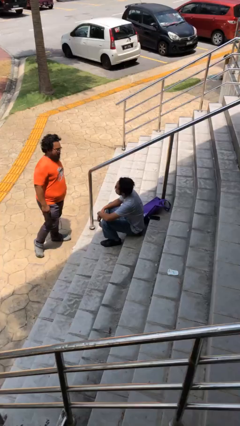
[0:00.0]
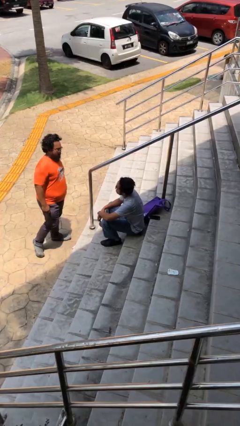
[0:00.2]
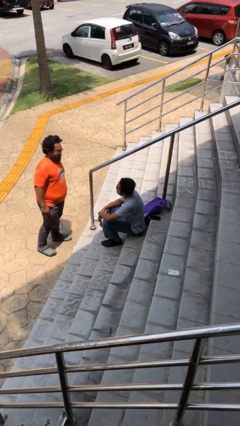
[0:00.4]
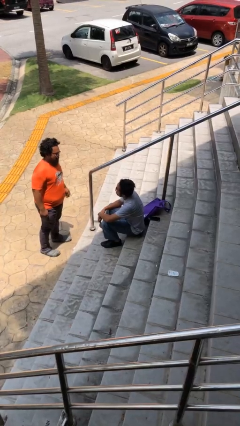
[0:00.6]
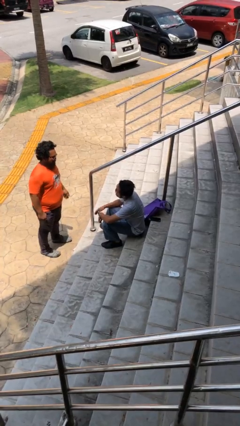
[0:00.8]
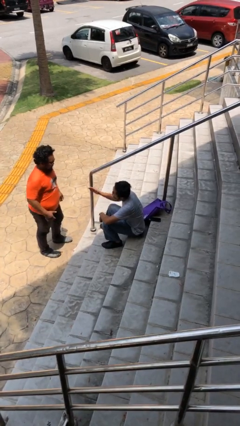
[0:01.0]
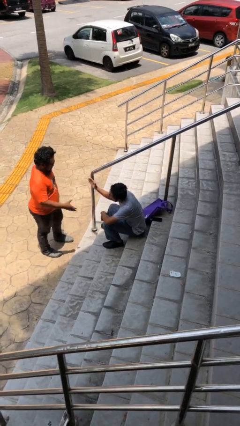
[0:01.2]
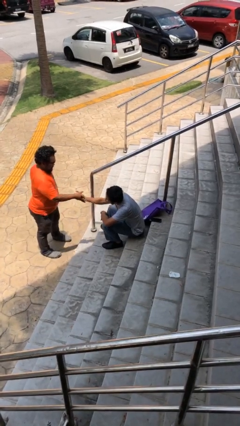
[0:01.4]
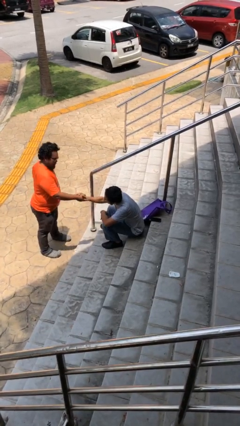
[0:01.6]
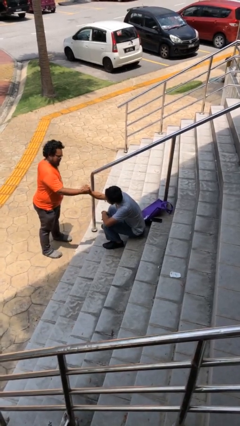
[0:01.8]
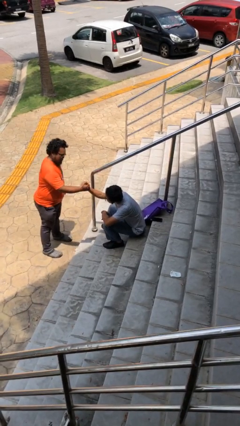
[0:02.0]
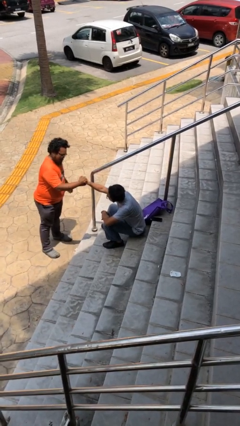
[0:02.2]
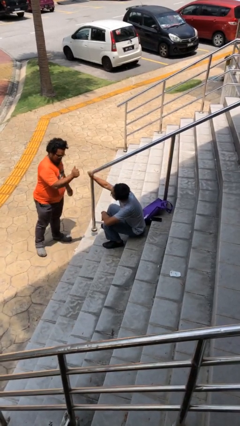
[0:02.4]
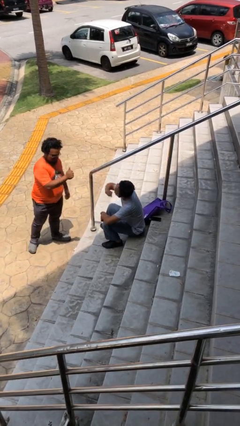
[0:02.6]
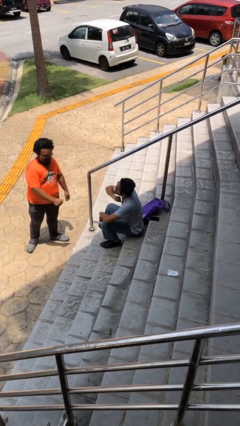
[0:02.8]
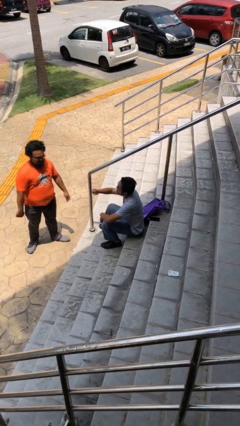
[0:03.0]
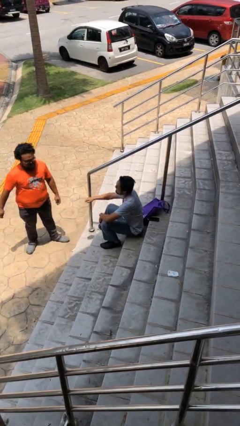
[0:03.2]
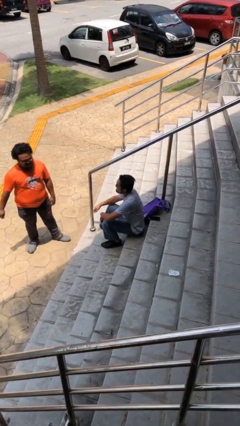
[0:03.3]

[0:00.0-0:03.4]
person shakes hand

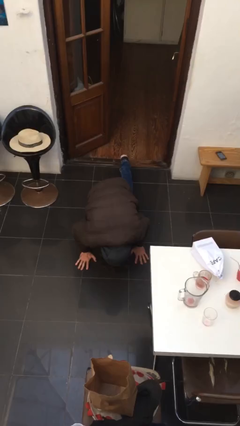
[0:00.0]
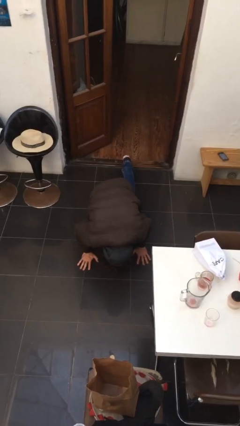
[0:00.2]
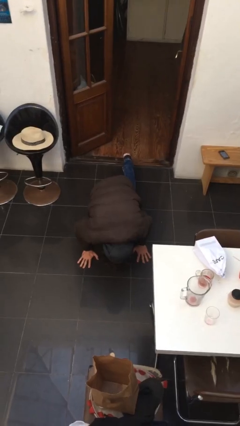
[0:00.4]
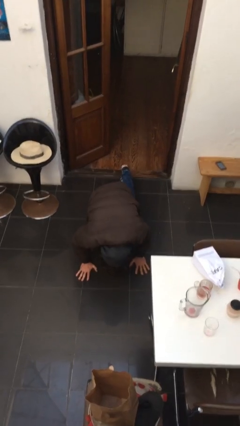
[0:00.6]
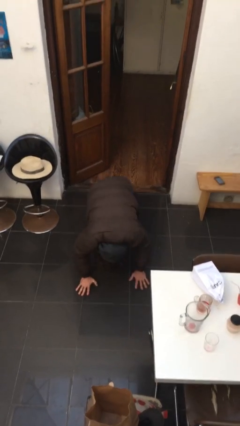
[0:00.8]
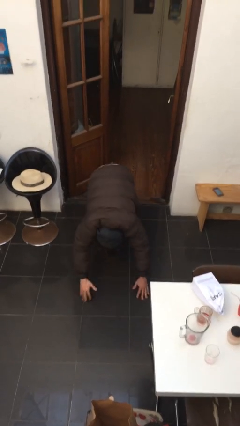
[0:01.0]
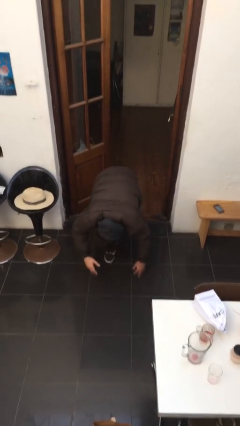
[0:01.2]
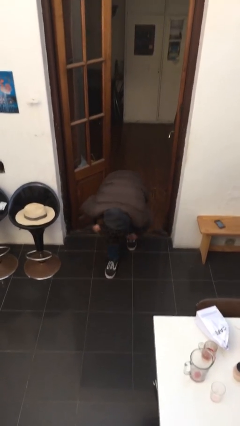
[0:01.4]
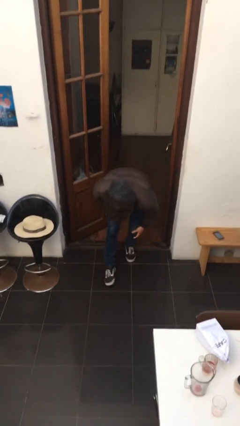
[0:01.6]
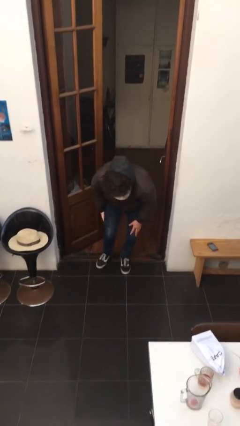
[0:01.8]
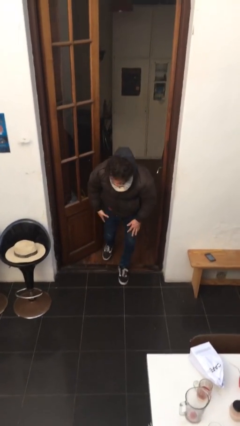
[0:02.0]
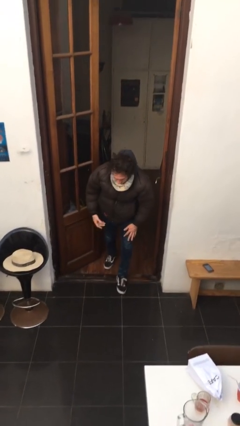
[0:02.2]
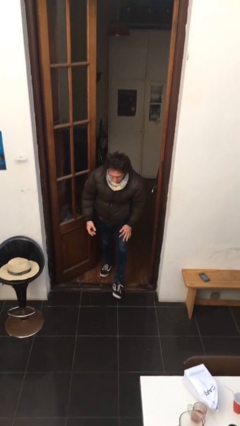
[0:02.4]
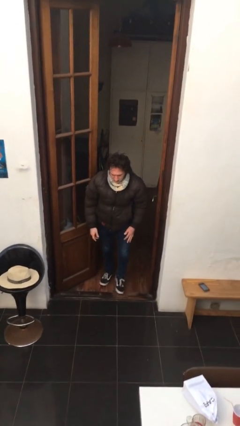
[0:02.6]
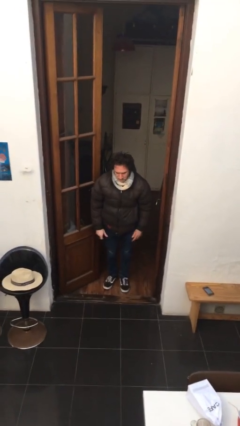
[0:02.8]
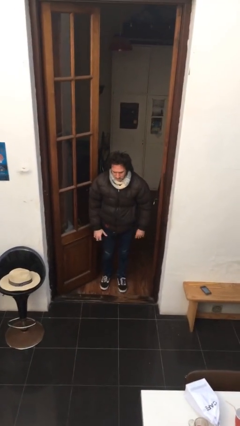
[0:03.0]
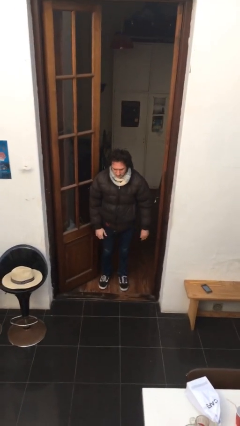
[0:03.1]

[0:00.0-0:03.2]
person stands up from floor

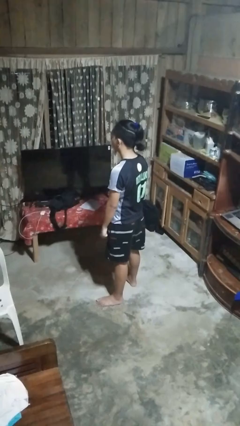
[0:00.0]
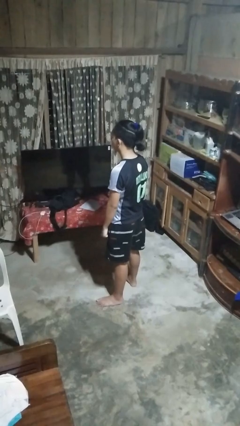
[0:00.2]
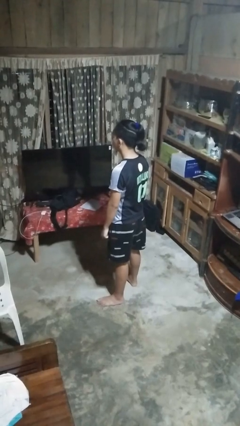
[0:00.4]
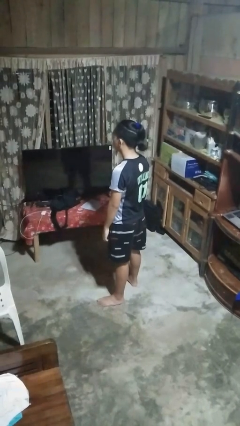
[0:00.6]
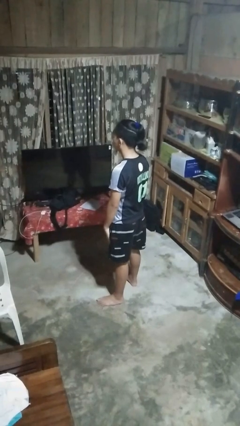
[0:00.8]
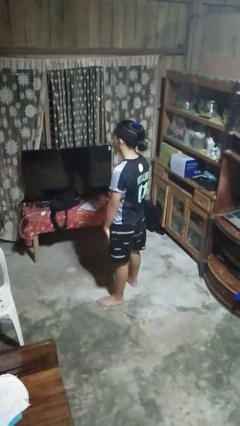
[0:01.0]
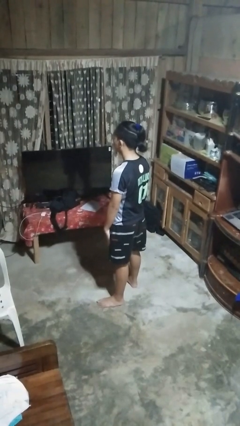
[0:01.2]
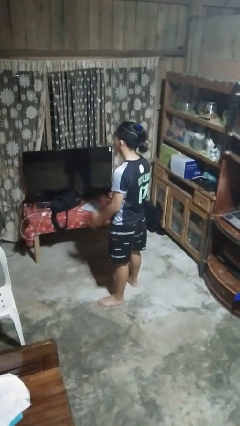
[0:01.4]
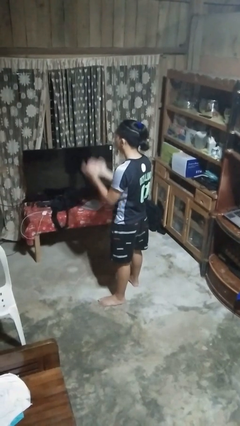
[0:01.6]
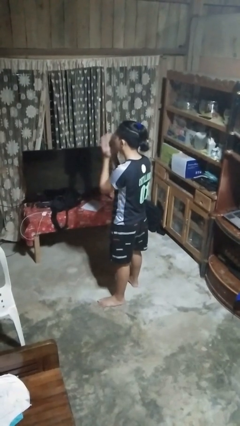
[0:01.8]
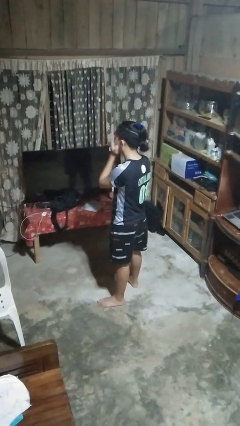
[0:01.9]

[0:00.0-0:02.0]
person covers face with hands

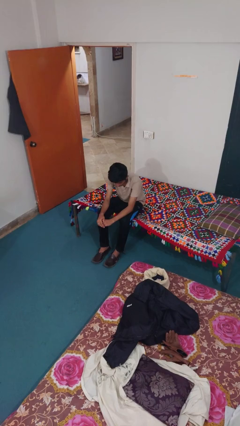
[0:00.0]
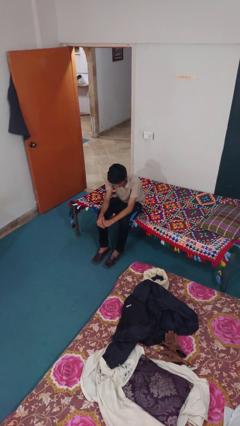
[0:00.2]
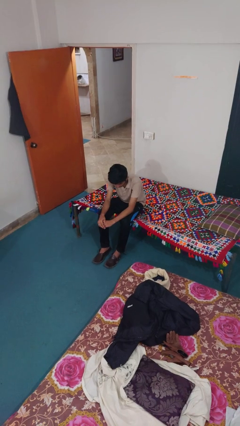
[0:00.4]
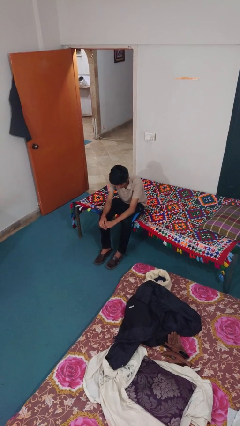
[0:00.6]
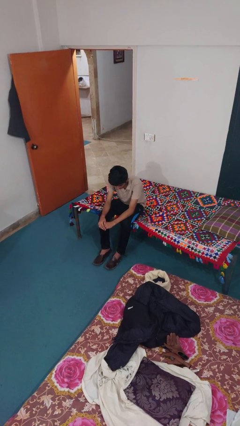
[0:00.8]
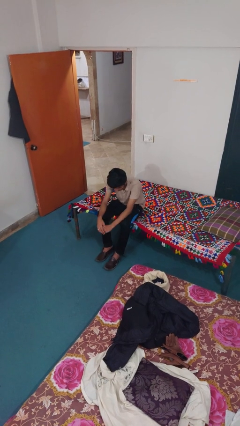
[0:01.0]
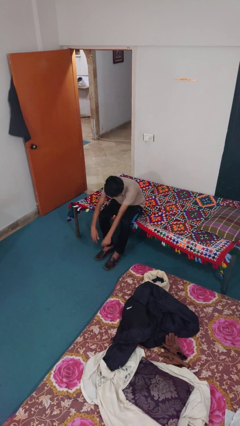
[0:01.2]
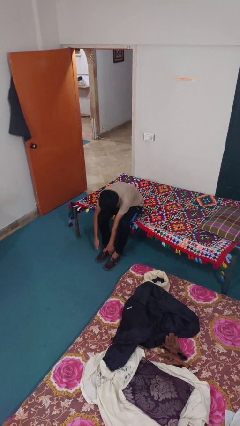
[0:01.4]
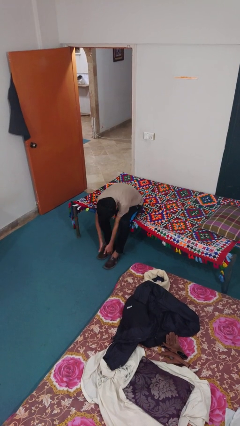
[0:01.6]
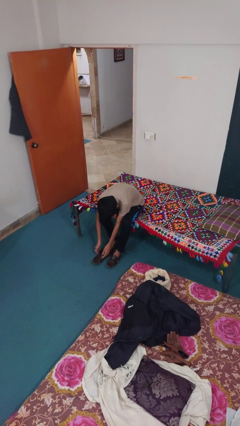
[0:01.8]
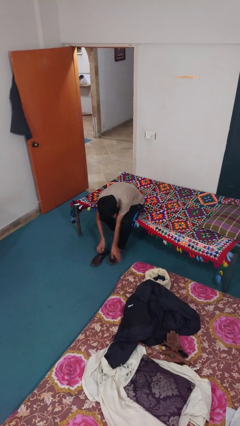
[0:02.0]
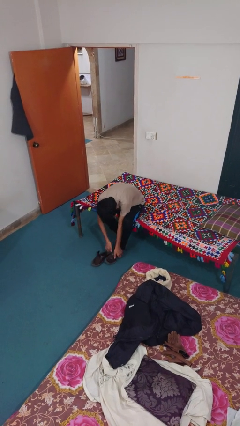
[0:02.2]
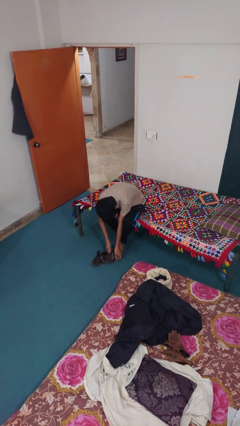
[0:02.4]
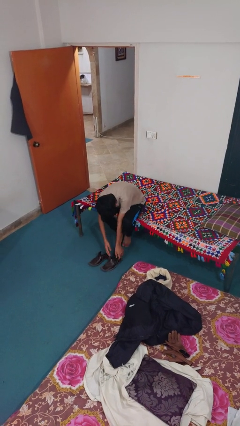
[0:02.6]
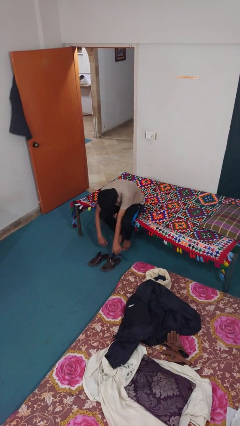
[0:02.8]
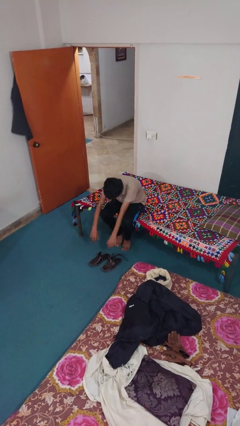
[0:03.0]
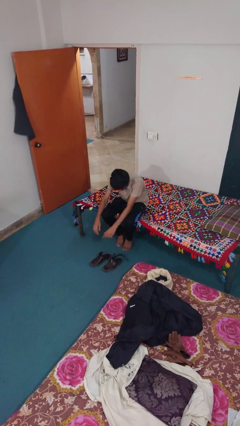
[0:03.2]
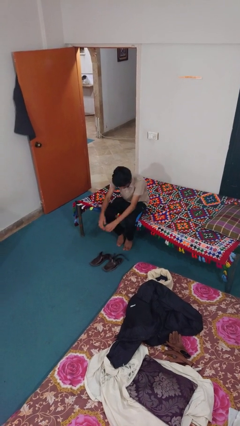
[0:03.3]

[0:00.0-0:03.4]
person takes off shoes

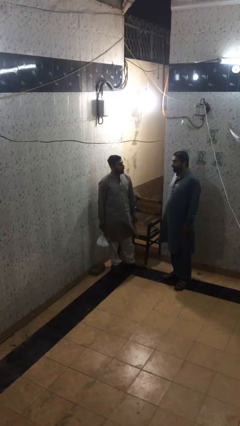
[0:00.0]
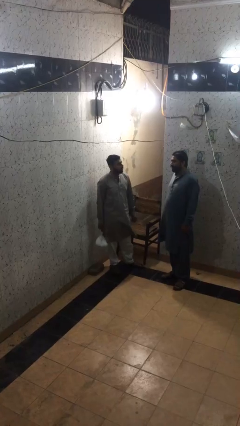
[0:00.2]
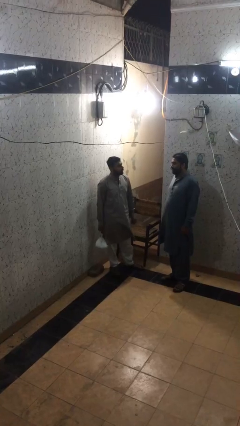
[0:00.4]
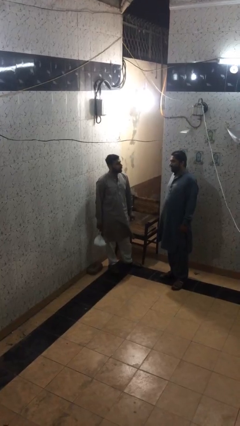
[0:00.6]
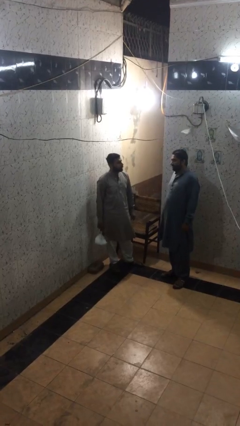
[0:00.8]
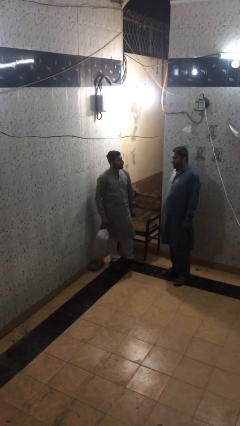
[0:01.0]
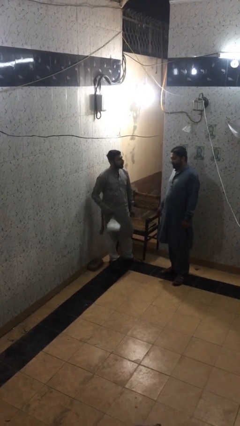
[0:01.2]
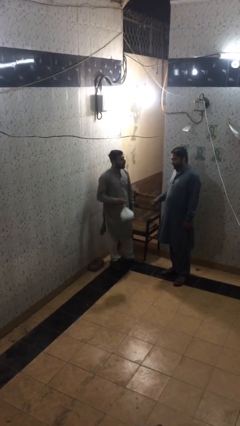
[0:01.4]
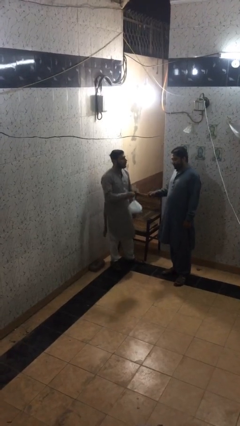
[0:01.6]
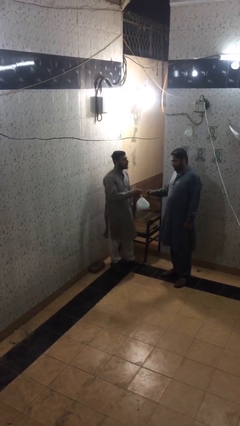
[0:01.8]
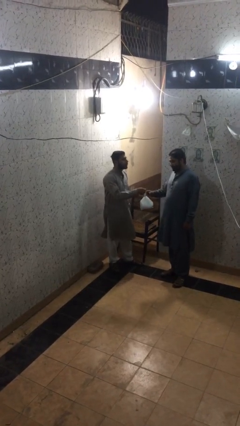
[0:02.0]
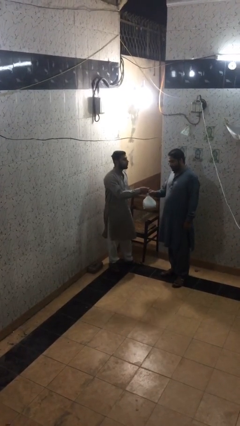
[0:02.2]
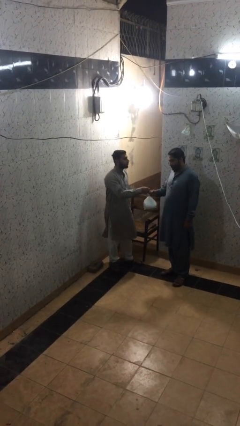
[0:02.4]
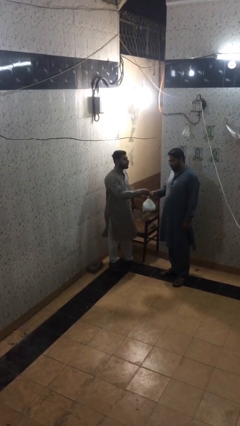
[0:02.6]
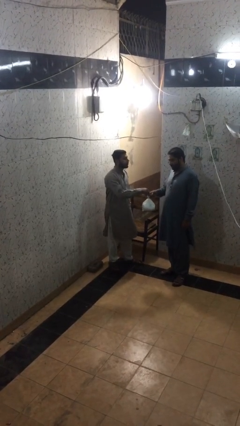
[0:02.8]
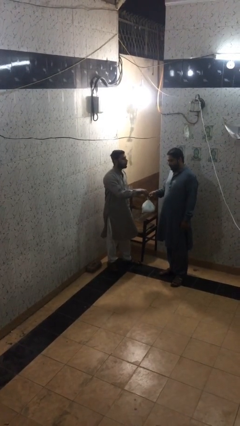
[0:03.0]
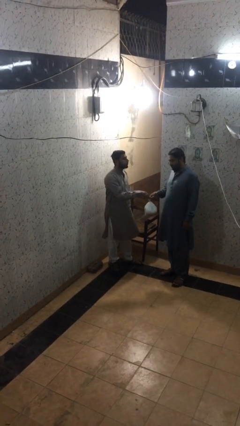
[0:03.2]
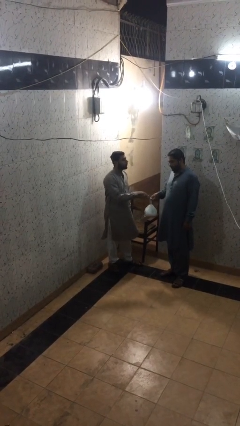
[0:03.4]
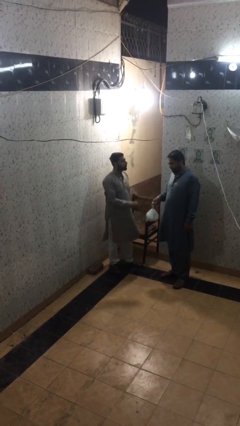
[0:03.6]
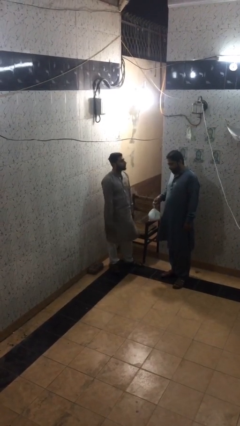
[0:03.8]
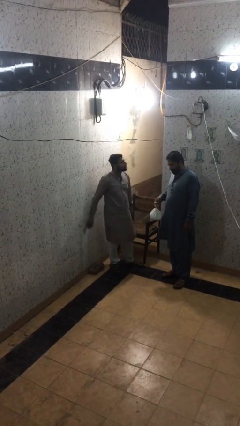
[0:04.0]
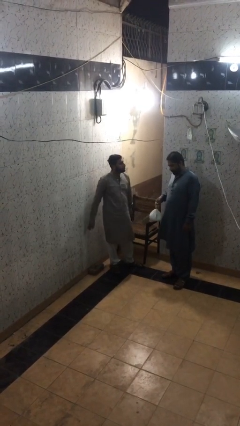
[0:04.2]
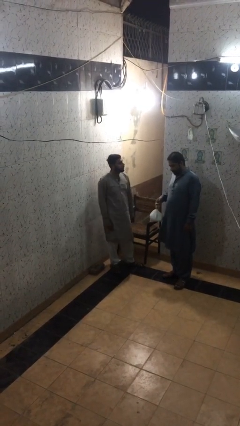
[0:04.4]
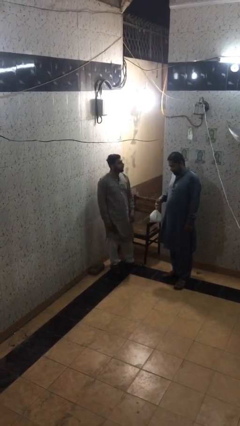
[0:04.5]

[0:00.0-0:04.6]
person transfers object to person

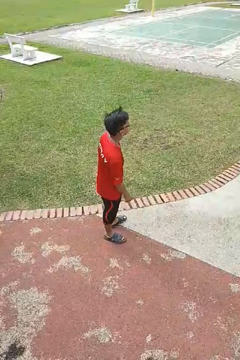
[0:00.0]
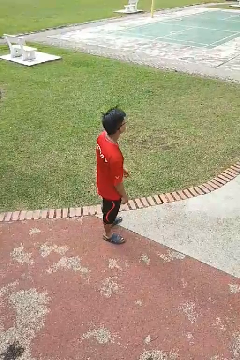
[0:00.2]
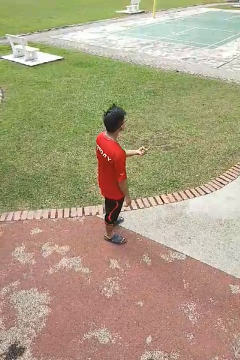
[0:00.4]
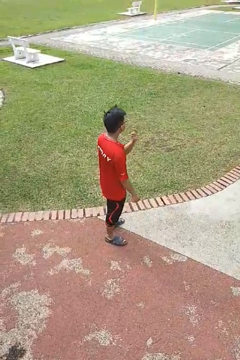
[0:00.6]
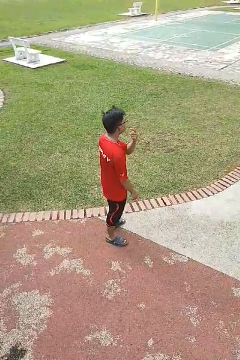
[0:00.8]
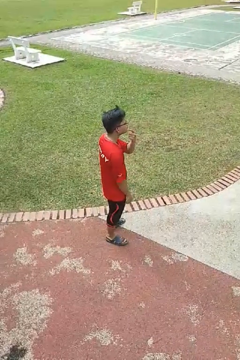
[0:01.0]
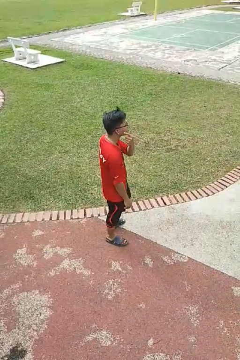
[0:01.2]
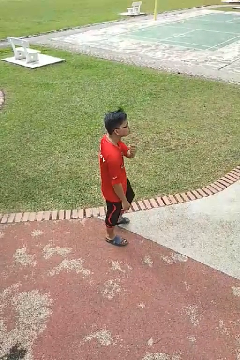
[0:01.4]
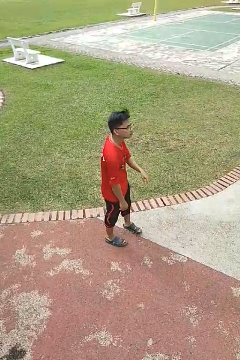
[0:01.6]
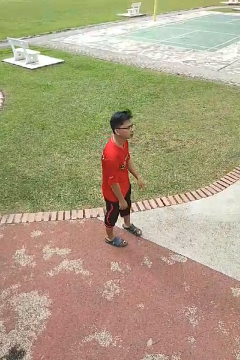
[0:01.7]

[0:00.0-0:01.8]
person gestures listen closely
